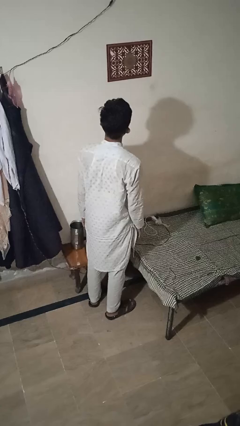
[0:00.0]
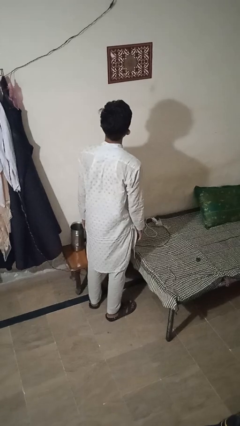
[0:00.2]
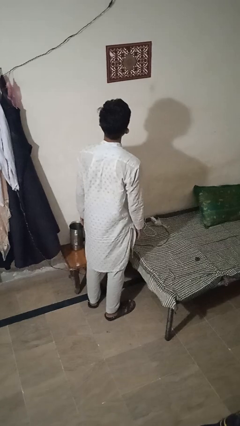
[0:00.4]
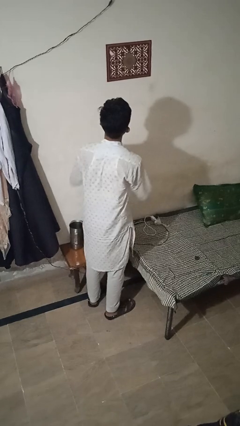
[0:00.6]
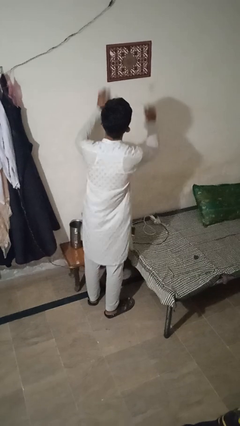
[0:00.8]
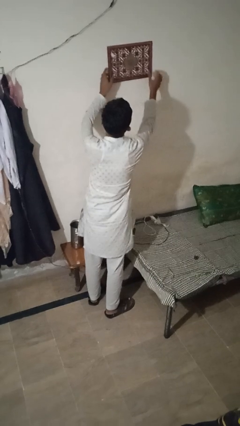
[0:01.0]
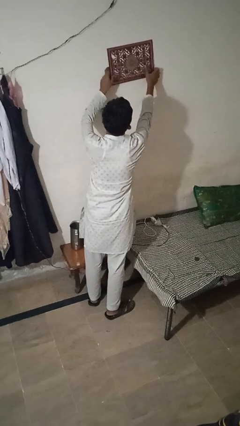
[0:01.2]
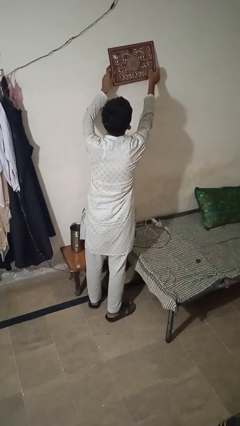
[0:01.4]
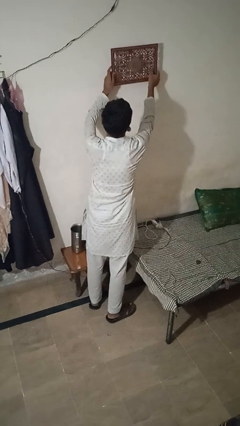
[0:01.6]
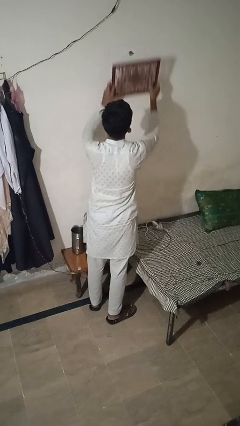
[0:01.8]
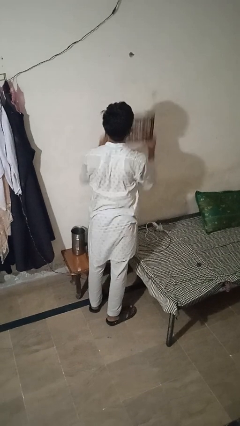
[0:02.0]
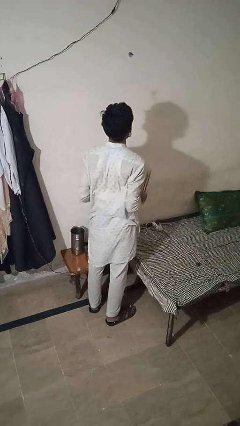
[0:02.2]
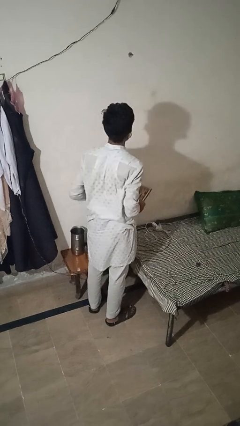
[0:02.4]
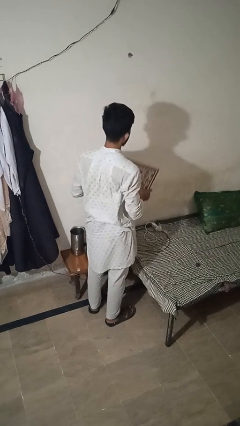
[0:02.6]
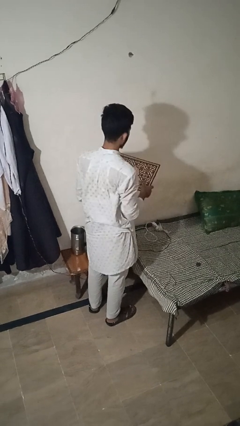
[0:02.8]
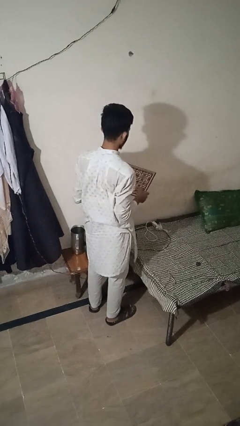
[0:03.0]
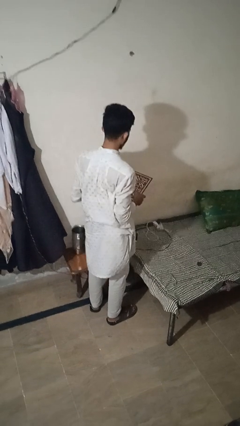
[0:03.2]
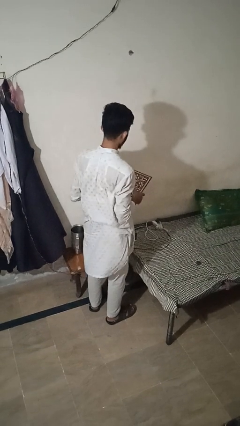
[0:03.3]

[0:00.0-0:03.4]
person takes down picture frame

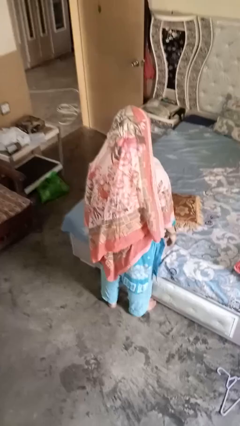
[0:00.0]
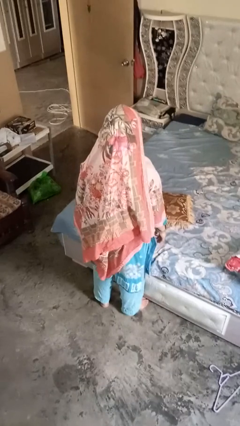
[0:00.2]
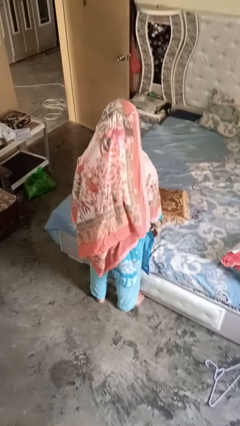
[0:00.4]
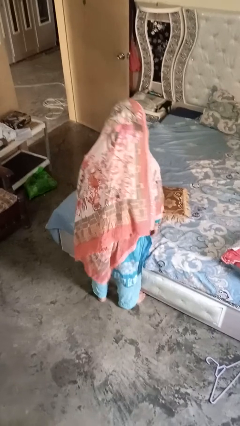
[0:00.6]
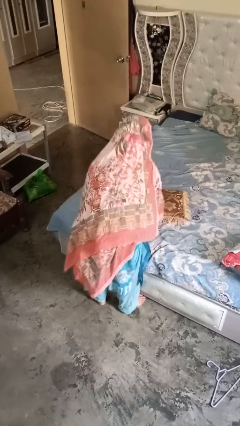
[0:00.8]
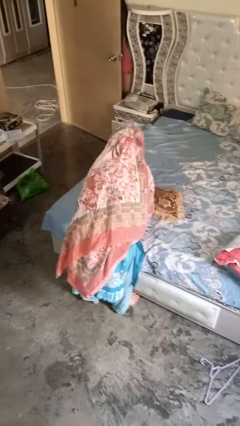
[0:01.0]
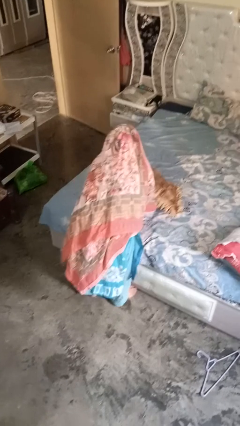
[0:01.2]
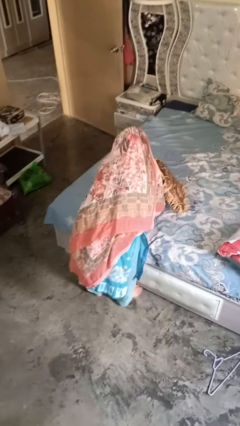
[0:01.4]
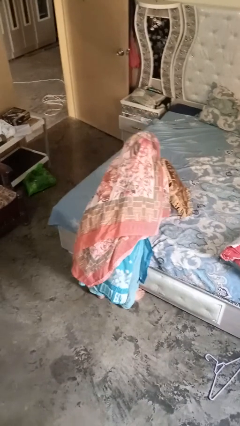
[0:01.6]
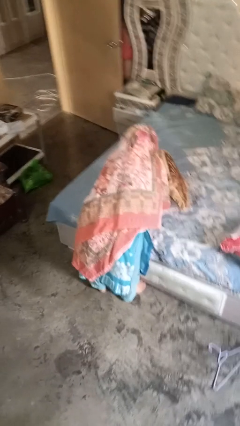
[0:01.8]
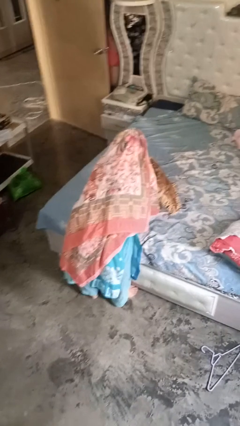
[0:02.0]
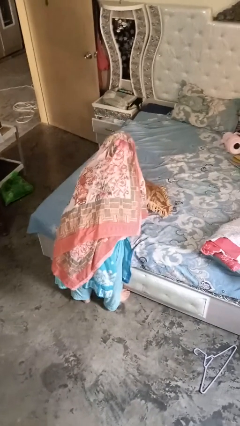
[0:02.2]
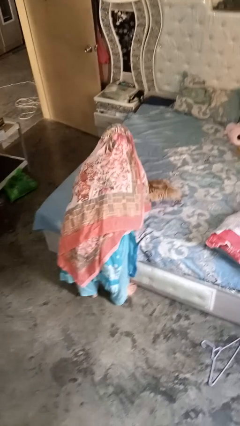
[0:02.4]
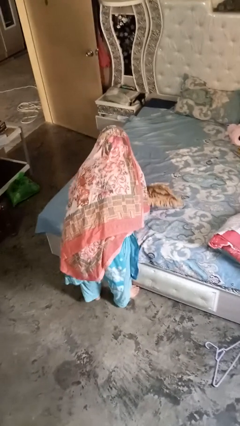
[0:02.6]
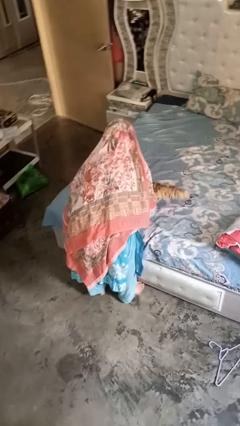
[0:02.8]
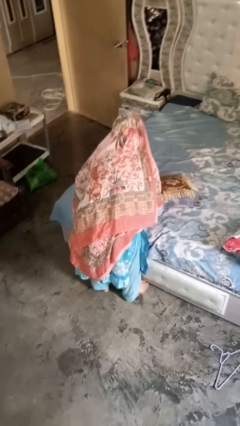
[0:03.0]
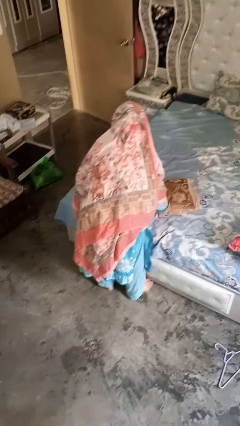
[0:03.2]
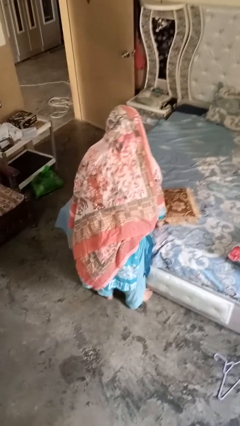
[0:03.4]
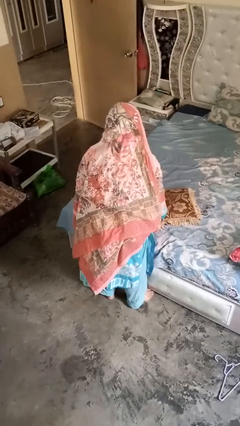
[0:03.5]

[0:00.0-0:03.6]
person searches under bed

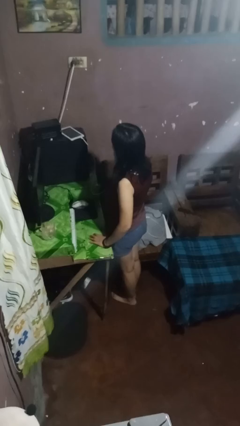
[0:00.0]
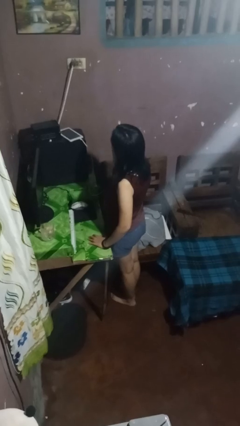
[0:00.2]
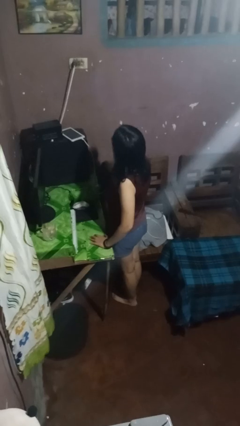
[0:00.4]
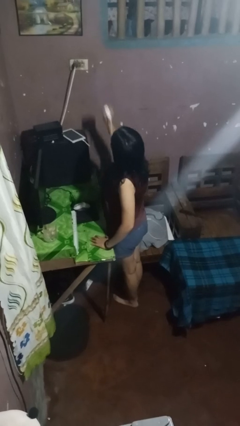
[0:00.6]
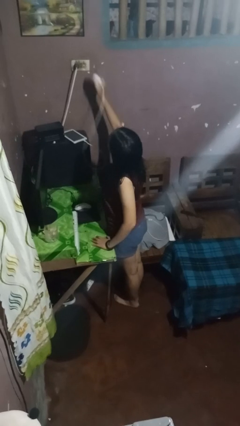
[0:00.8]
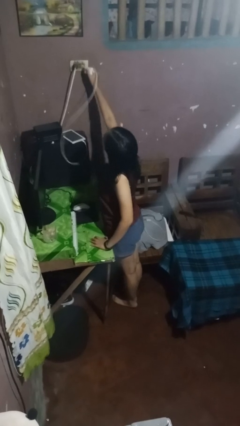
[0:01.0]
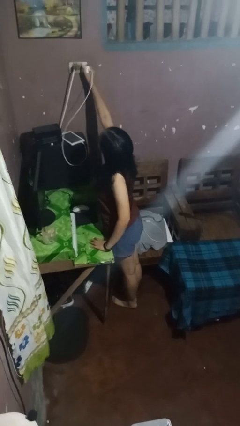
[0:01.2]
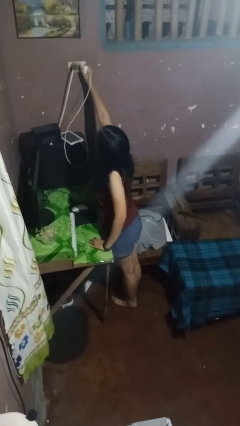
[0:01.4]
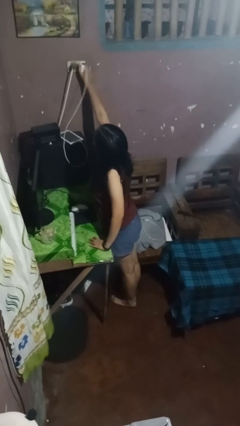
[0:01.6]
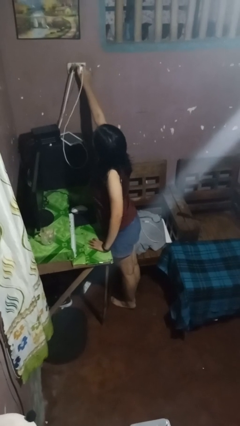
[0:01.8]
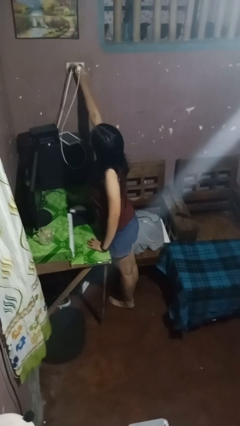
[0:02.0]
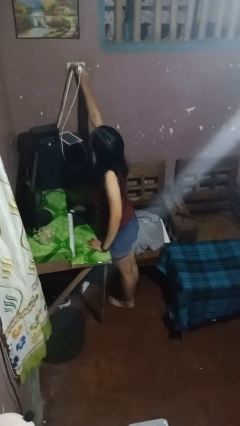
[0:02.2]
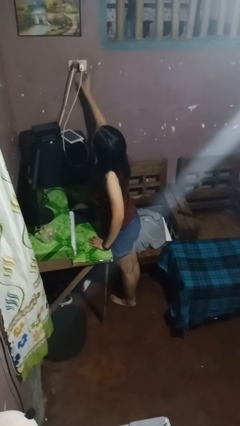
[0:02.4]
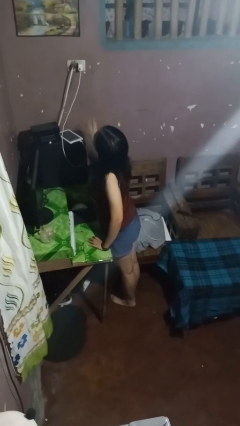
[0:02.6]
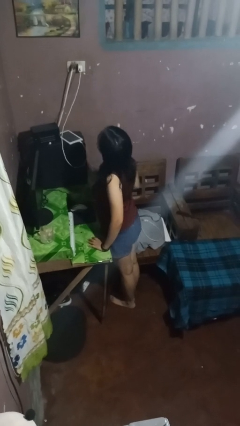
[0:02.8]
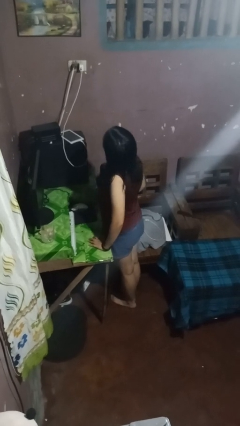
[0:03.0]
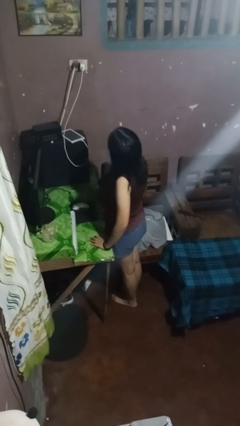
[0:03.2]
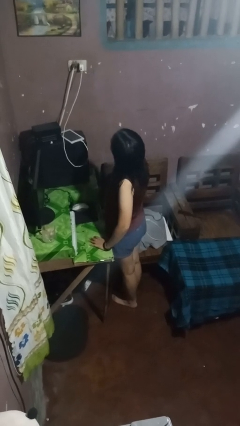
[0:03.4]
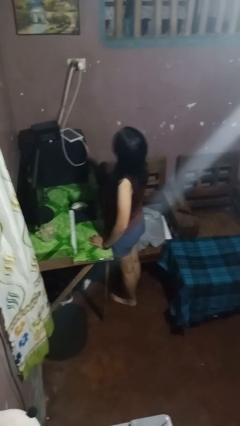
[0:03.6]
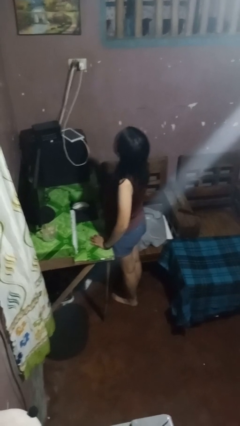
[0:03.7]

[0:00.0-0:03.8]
person plugs into electrical socket

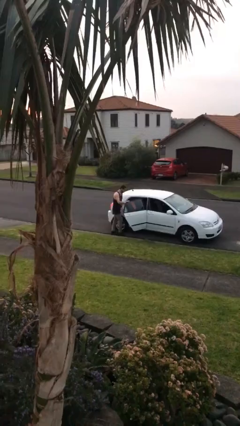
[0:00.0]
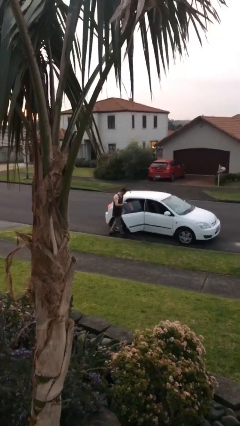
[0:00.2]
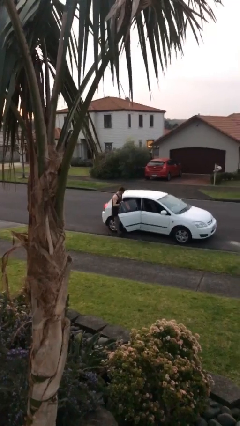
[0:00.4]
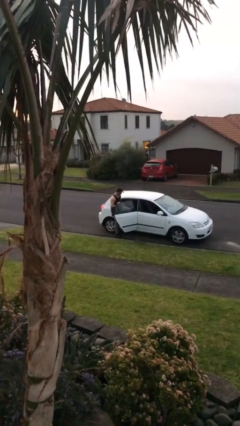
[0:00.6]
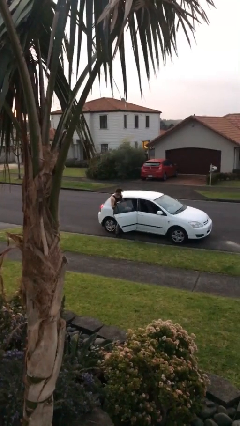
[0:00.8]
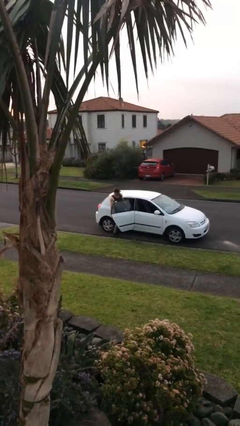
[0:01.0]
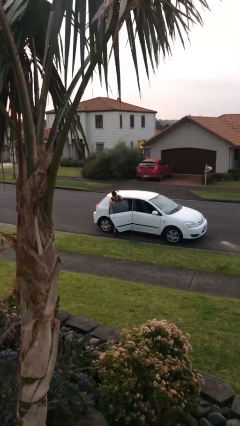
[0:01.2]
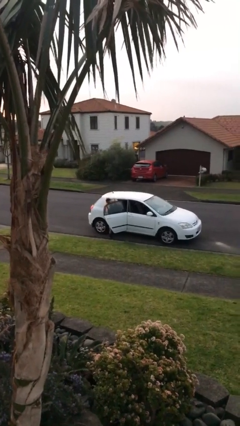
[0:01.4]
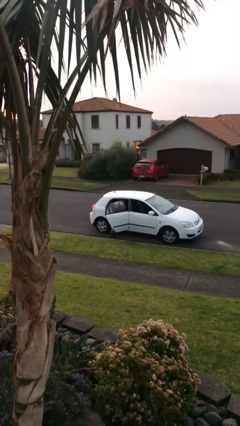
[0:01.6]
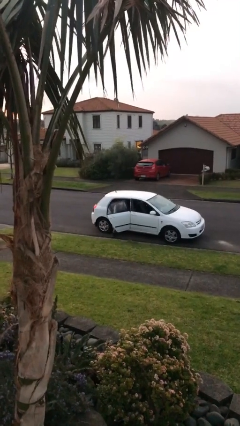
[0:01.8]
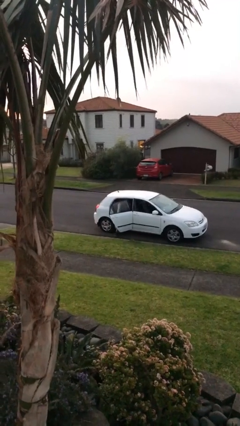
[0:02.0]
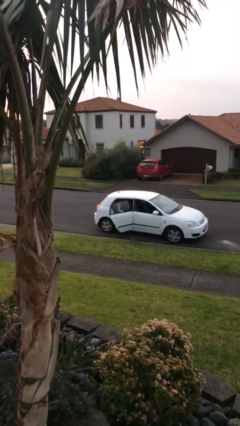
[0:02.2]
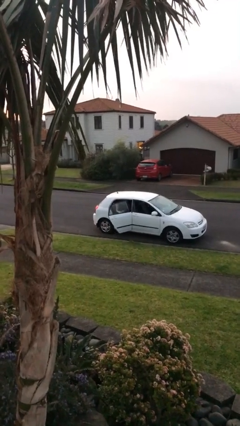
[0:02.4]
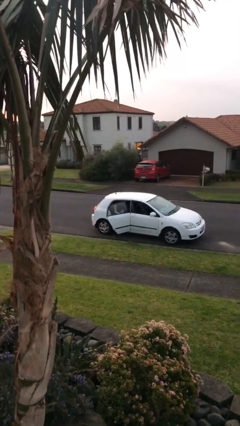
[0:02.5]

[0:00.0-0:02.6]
person enters car

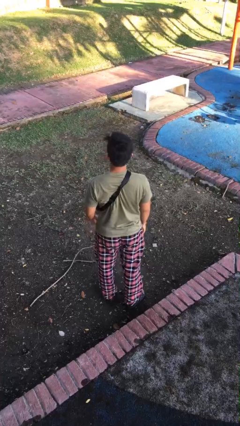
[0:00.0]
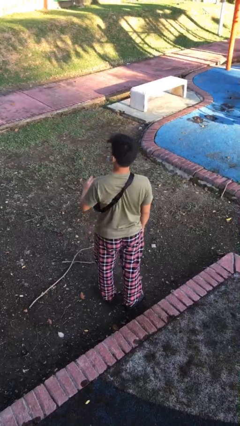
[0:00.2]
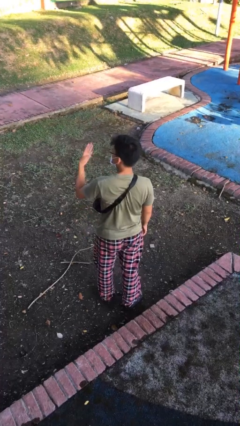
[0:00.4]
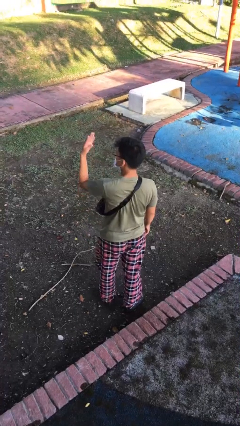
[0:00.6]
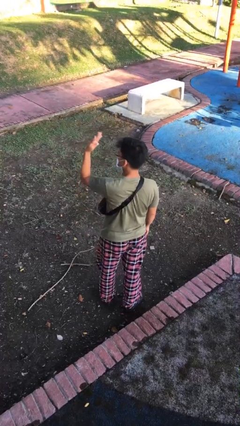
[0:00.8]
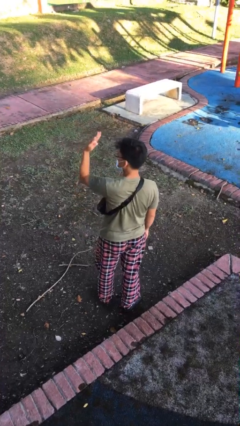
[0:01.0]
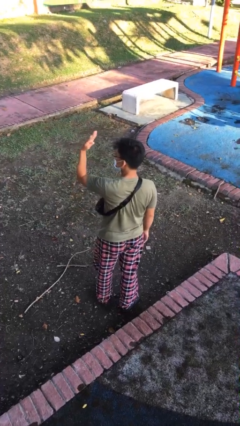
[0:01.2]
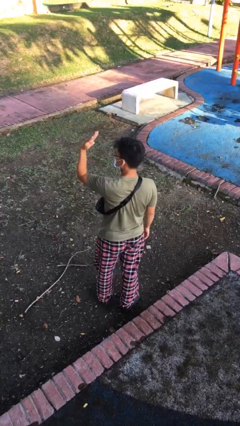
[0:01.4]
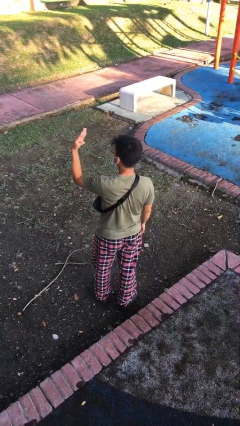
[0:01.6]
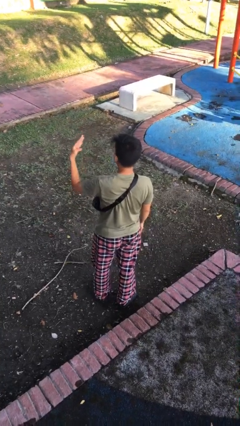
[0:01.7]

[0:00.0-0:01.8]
person gestures number four

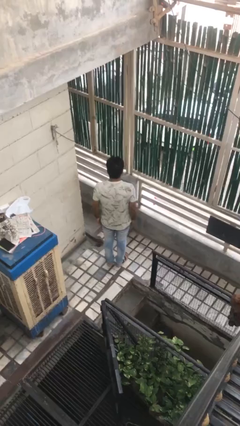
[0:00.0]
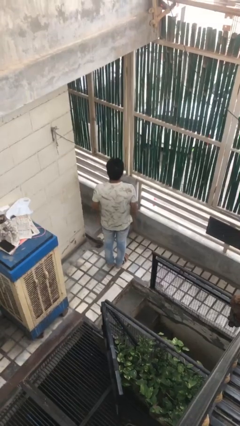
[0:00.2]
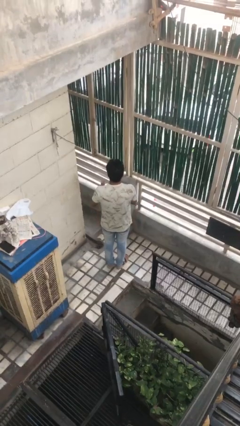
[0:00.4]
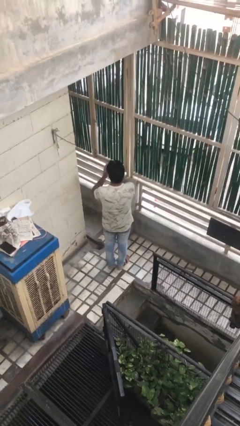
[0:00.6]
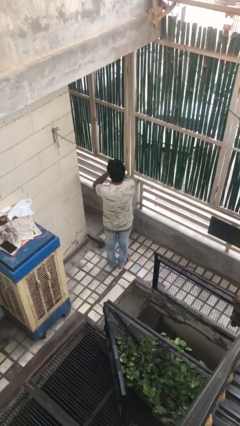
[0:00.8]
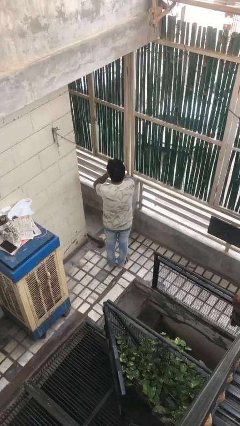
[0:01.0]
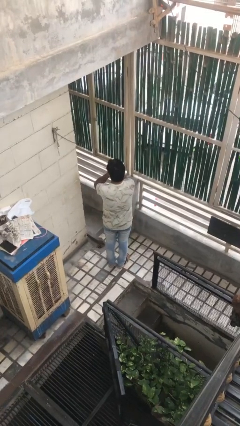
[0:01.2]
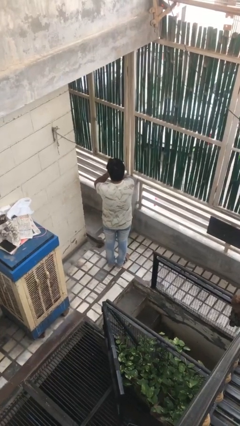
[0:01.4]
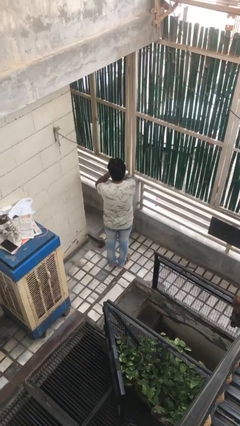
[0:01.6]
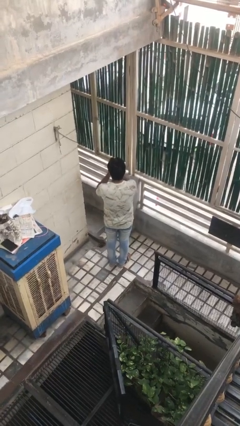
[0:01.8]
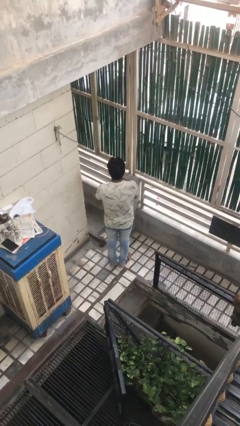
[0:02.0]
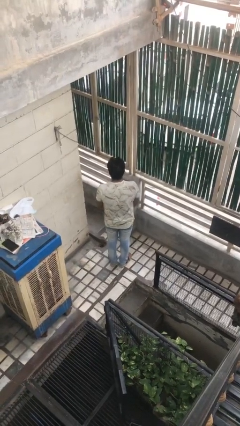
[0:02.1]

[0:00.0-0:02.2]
person covers face with hands
